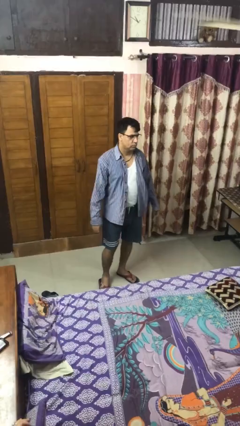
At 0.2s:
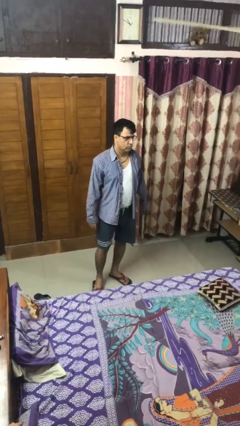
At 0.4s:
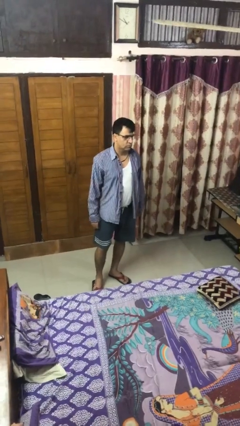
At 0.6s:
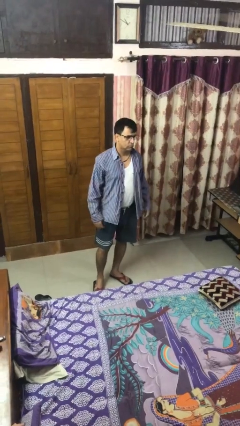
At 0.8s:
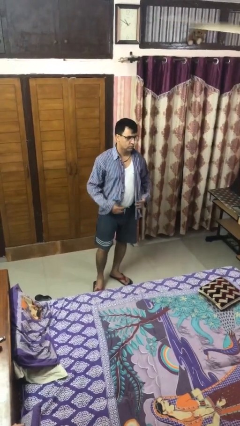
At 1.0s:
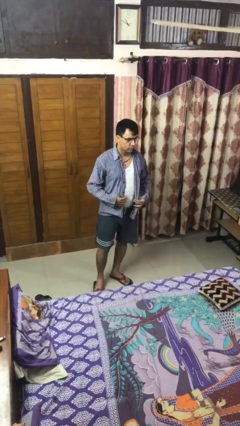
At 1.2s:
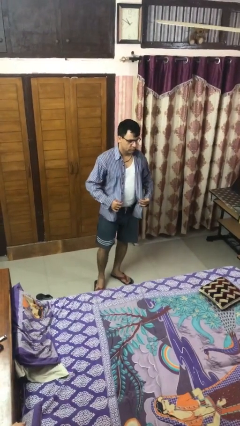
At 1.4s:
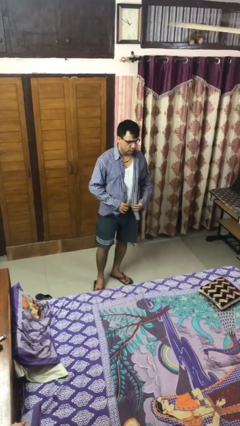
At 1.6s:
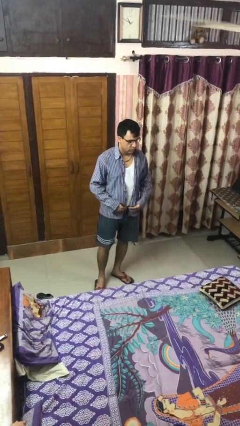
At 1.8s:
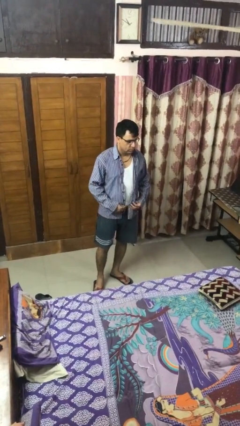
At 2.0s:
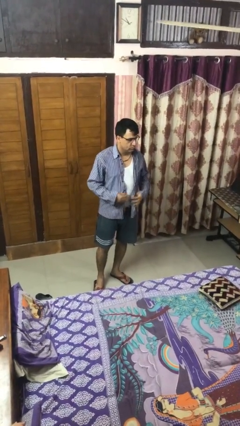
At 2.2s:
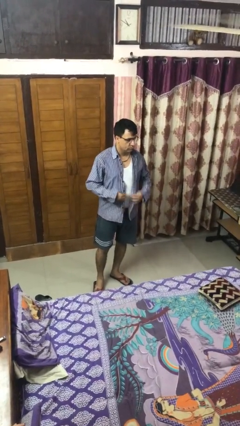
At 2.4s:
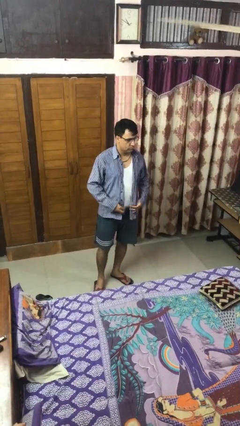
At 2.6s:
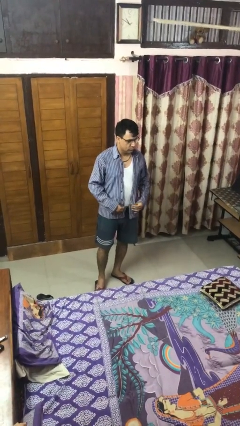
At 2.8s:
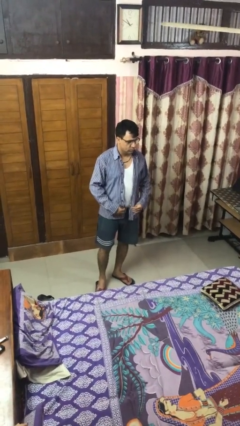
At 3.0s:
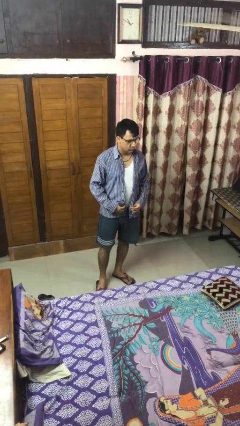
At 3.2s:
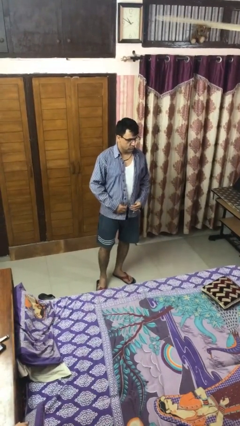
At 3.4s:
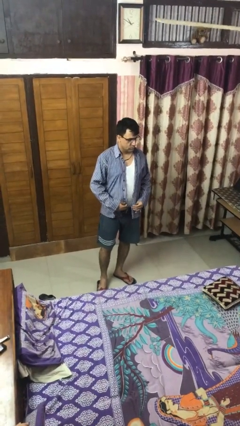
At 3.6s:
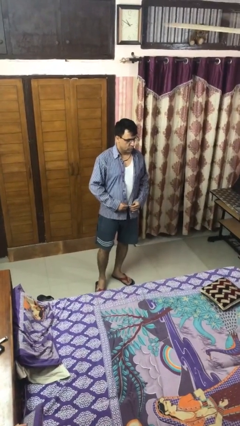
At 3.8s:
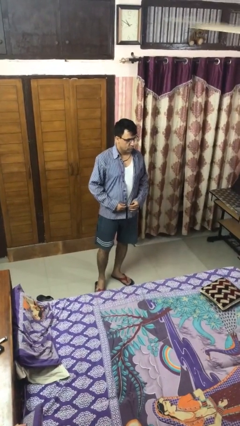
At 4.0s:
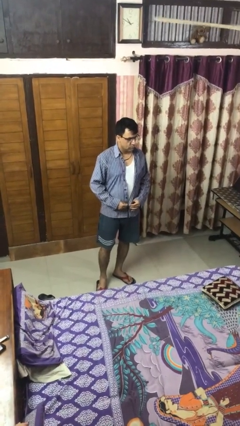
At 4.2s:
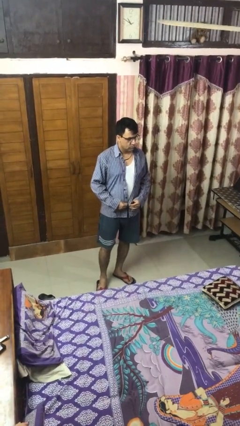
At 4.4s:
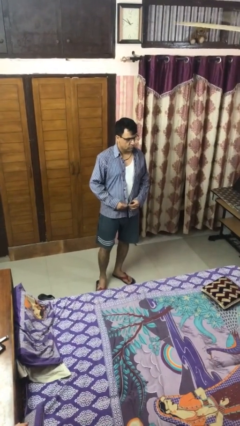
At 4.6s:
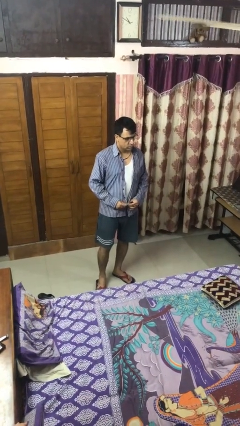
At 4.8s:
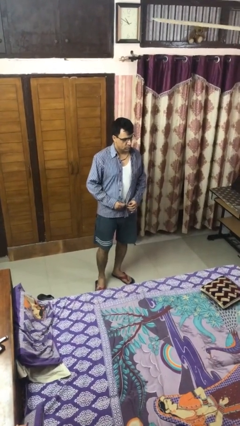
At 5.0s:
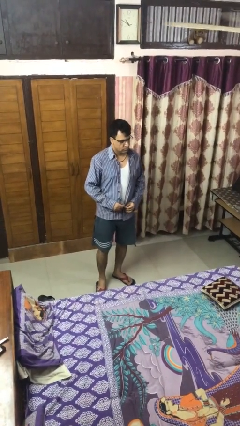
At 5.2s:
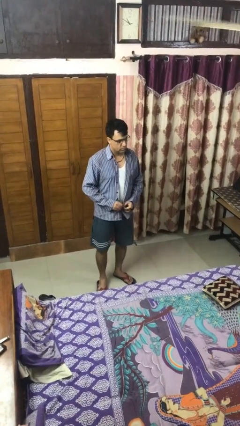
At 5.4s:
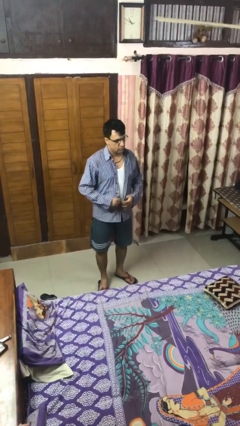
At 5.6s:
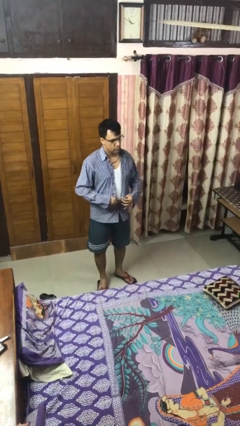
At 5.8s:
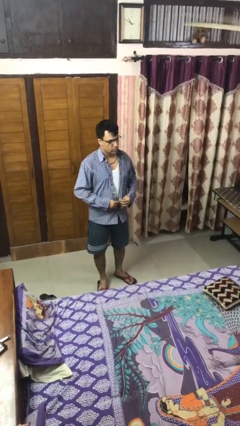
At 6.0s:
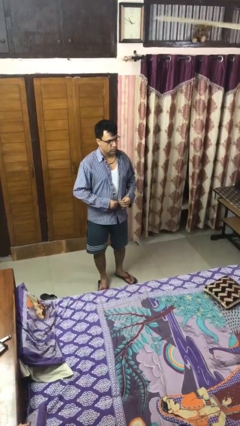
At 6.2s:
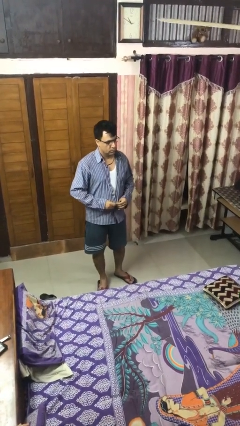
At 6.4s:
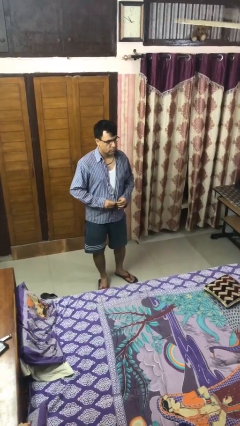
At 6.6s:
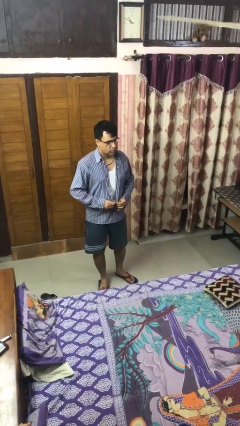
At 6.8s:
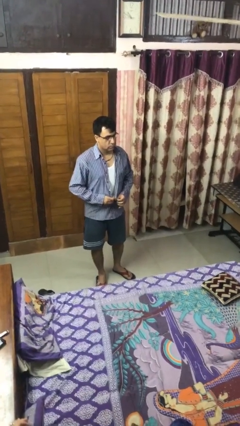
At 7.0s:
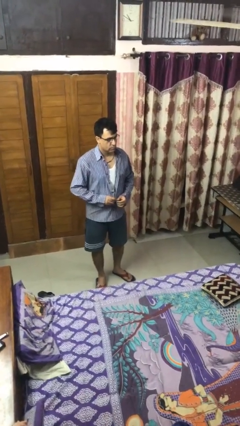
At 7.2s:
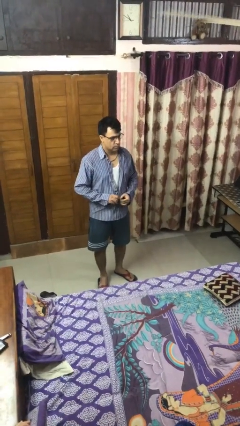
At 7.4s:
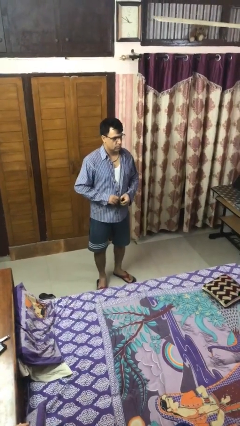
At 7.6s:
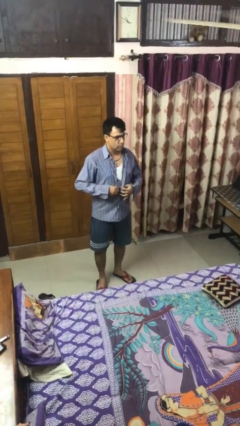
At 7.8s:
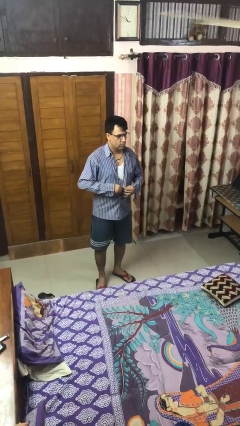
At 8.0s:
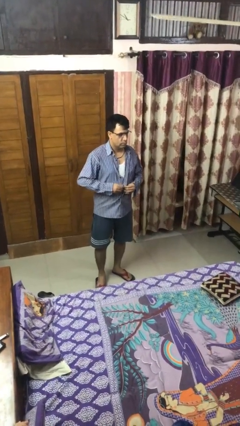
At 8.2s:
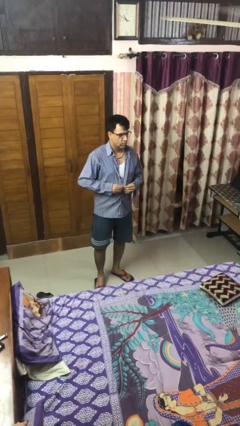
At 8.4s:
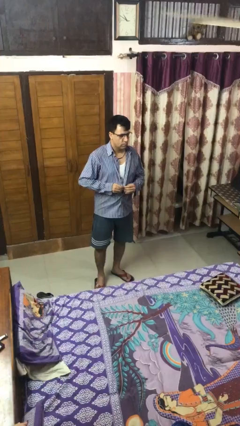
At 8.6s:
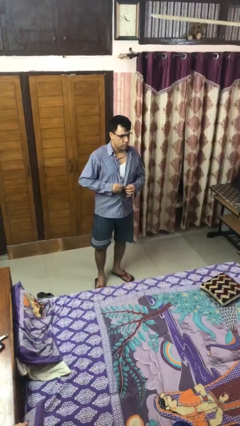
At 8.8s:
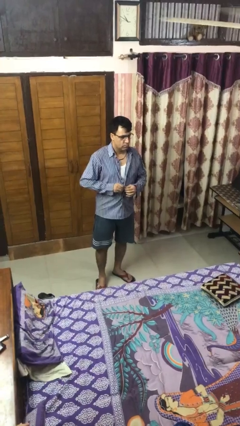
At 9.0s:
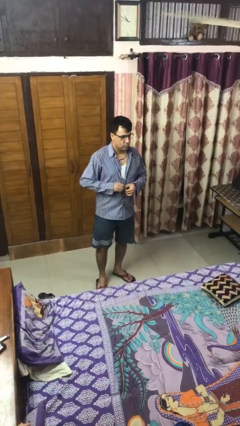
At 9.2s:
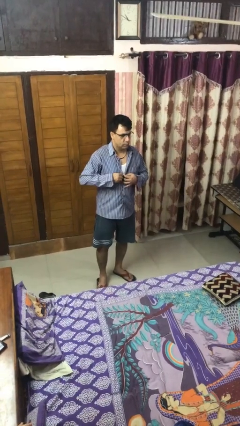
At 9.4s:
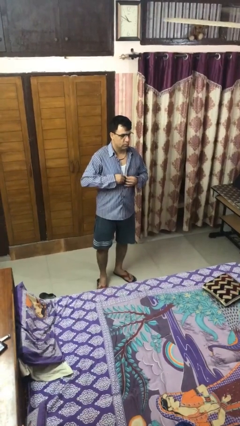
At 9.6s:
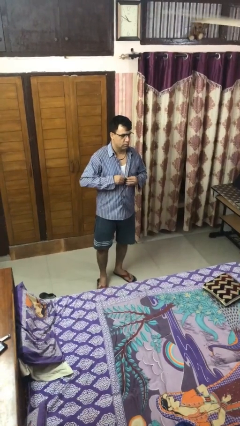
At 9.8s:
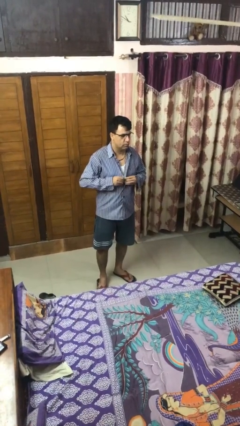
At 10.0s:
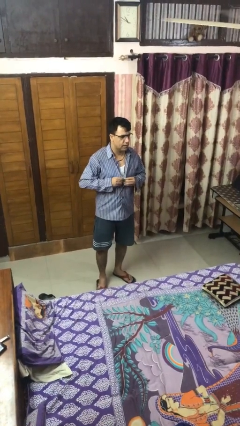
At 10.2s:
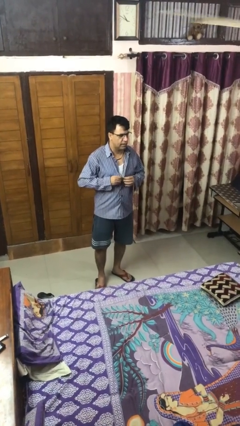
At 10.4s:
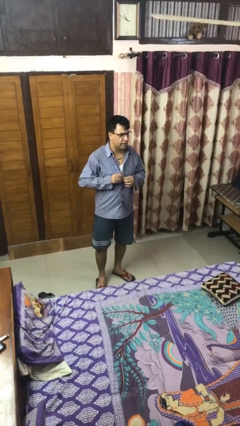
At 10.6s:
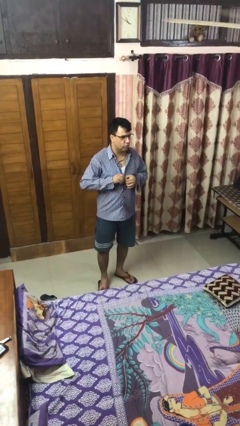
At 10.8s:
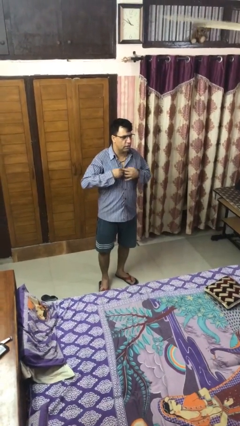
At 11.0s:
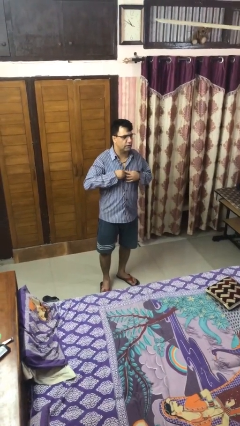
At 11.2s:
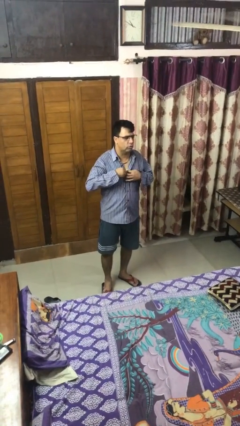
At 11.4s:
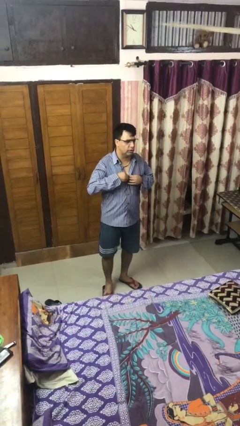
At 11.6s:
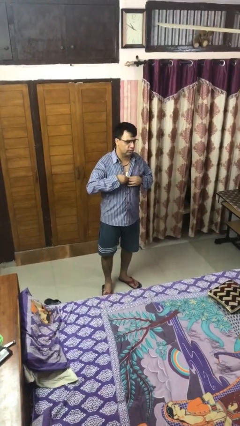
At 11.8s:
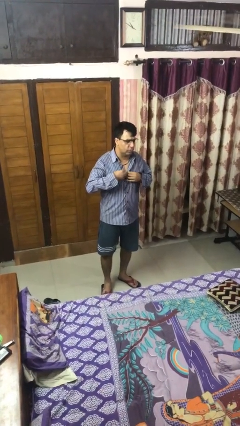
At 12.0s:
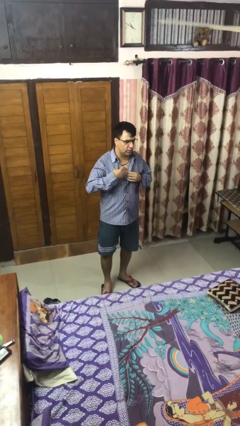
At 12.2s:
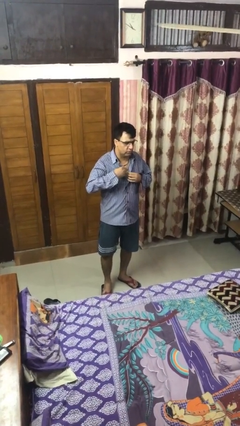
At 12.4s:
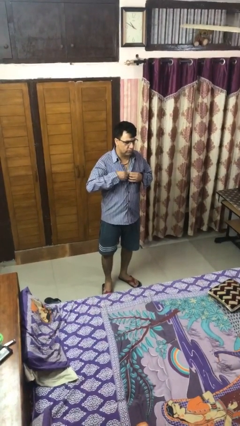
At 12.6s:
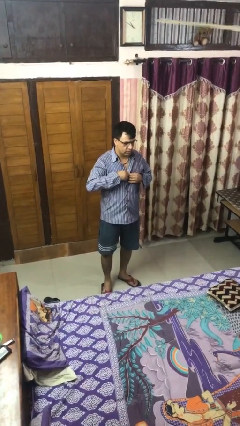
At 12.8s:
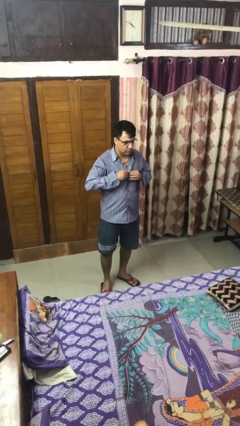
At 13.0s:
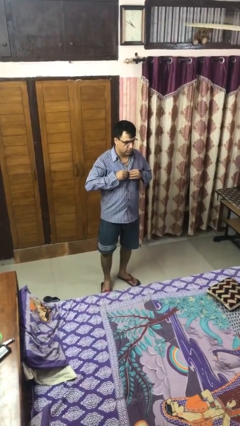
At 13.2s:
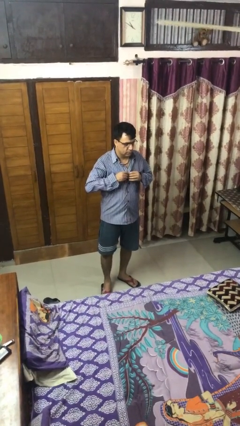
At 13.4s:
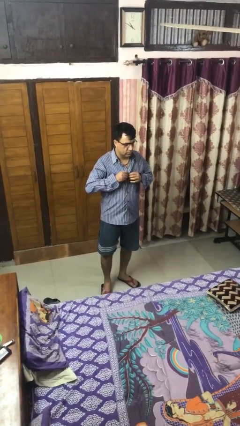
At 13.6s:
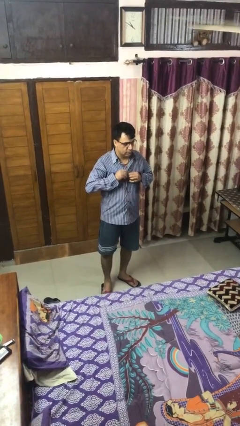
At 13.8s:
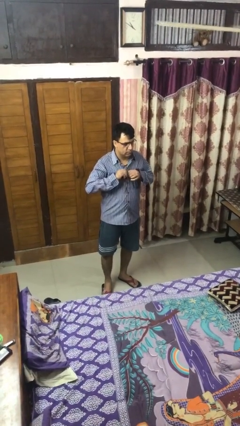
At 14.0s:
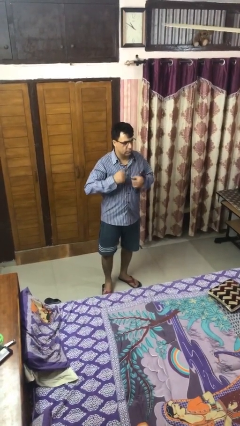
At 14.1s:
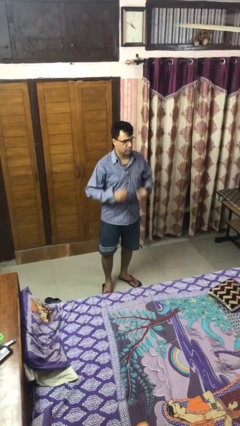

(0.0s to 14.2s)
person buttons shirt

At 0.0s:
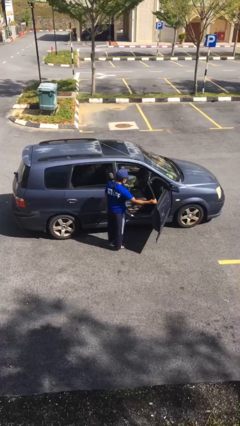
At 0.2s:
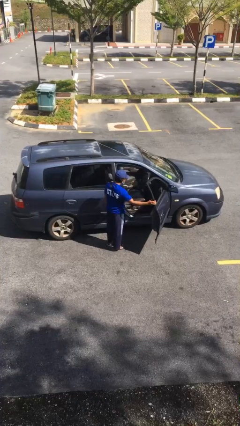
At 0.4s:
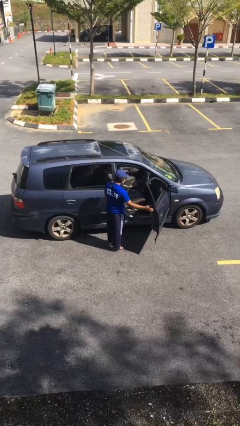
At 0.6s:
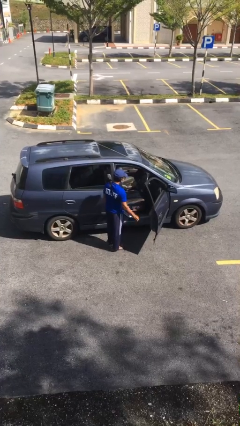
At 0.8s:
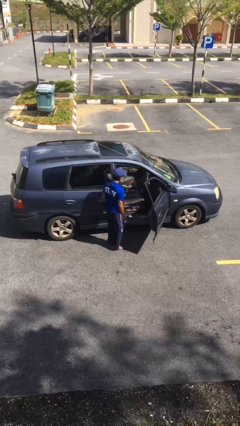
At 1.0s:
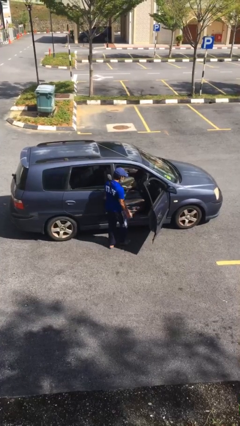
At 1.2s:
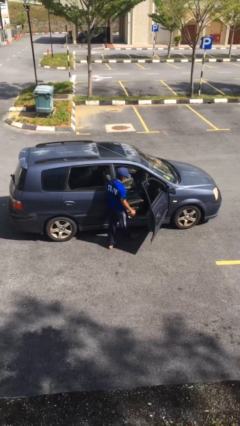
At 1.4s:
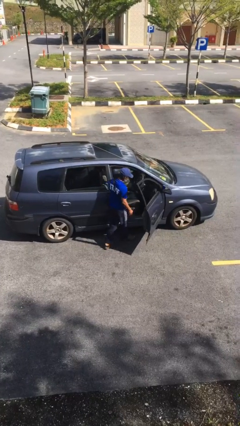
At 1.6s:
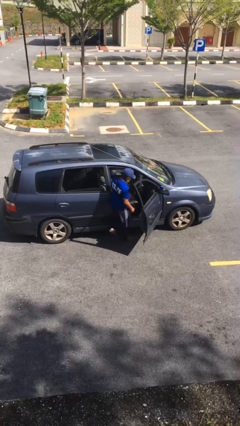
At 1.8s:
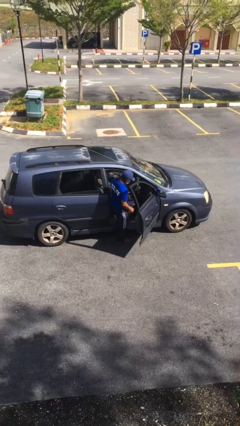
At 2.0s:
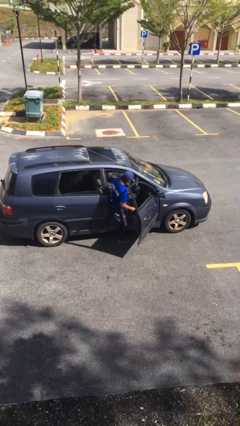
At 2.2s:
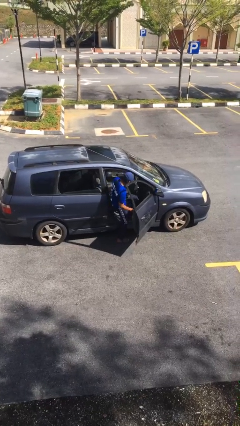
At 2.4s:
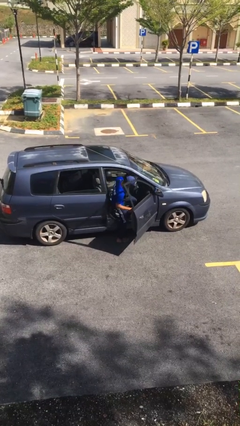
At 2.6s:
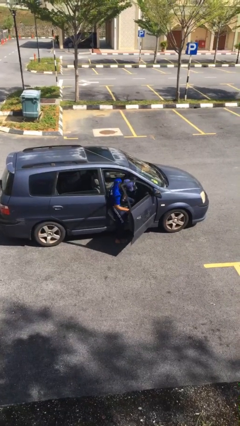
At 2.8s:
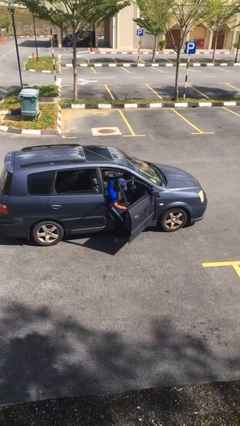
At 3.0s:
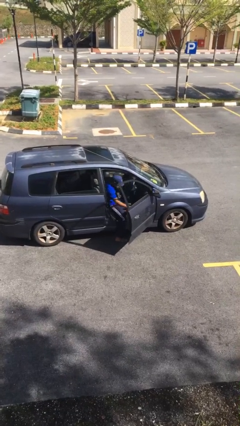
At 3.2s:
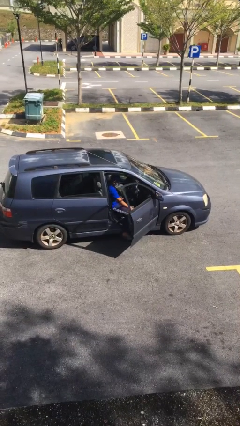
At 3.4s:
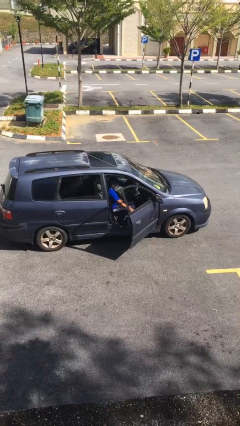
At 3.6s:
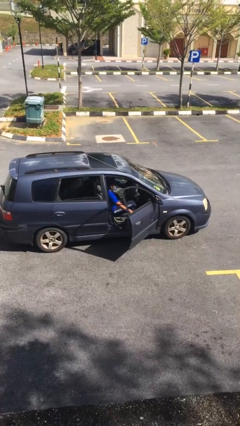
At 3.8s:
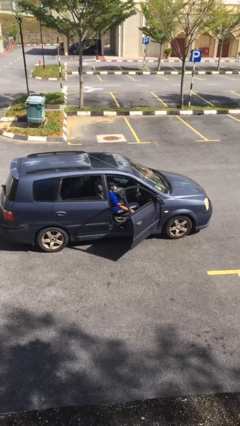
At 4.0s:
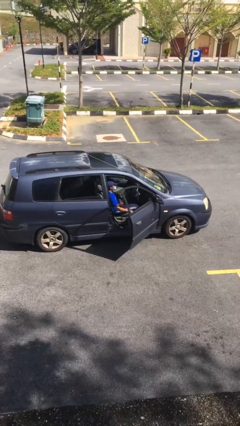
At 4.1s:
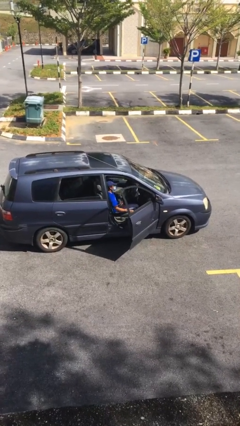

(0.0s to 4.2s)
person enters car
